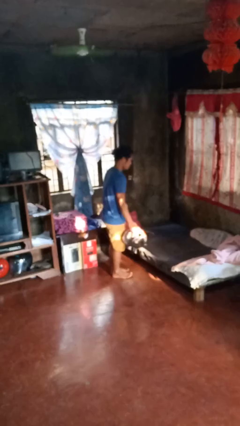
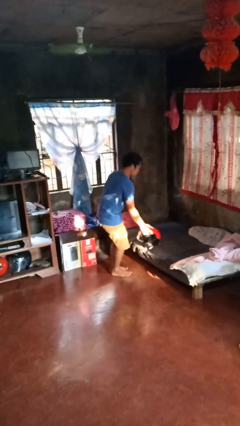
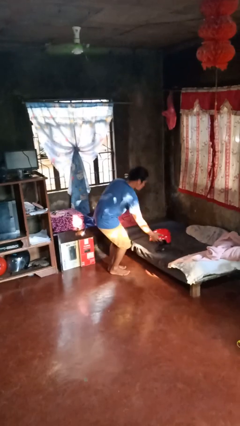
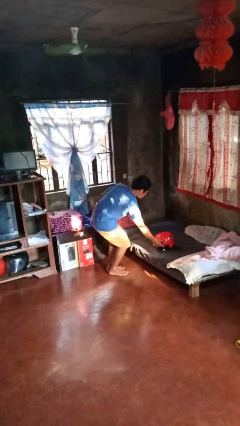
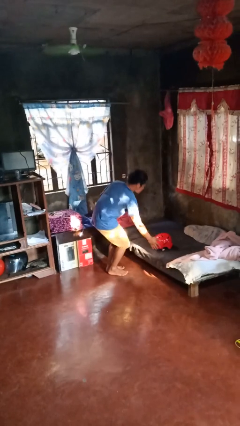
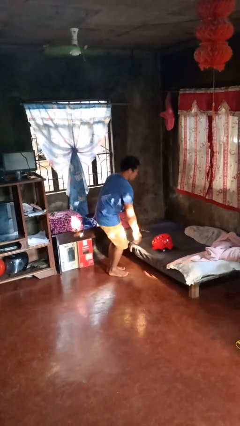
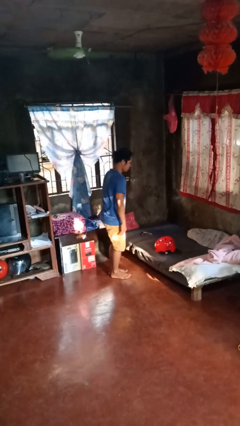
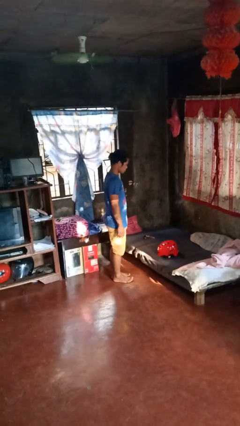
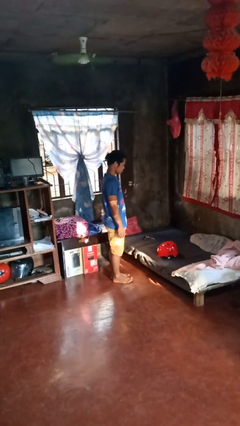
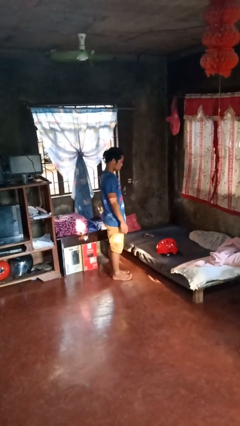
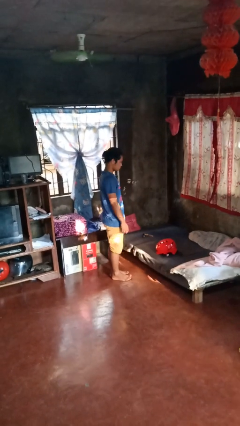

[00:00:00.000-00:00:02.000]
person puts down object on bed

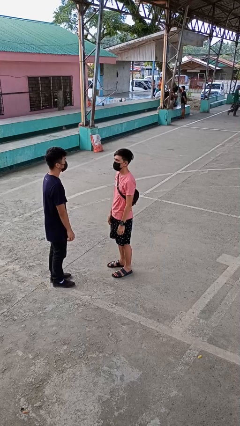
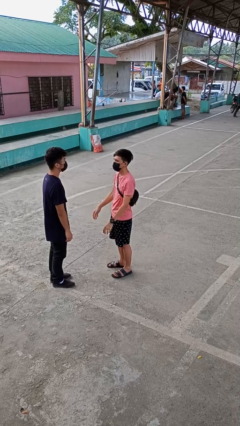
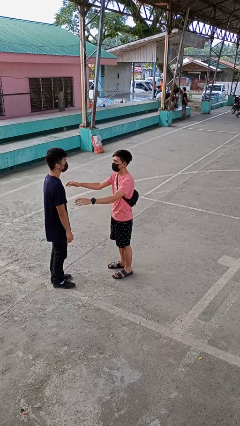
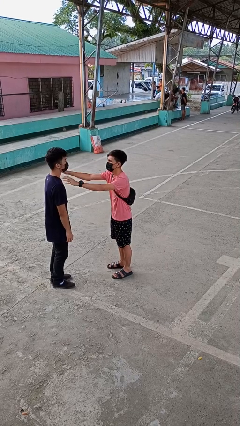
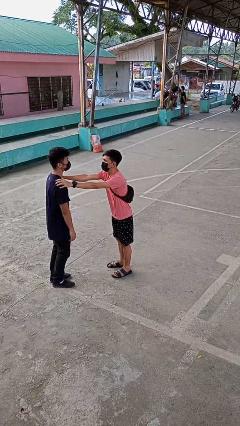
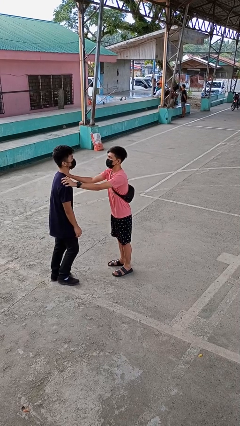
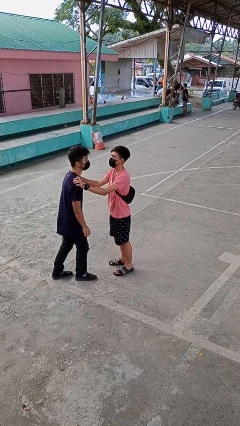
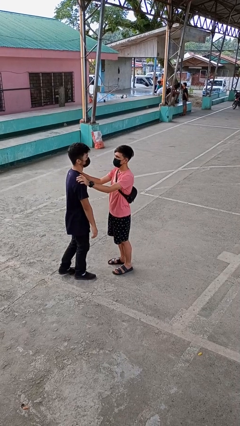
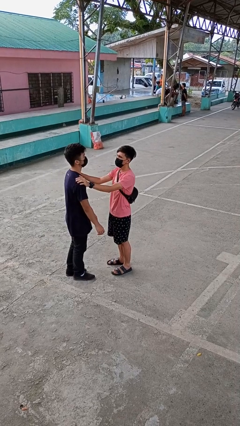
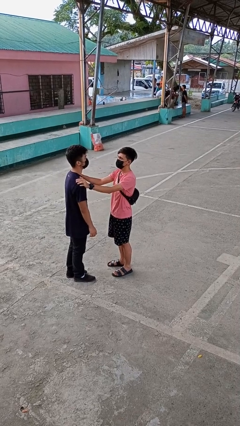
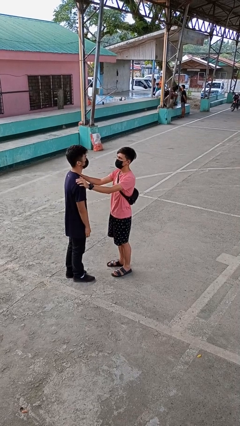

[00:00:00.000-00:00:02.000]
person grabs person by shoulder

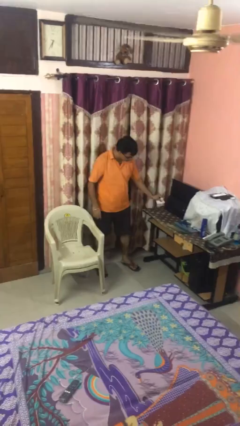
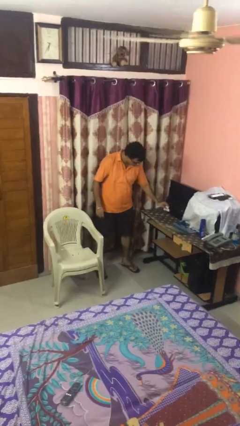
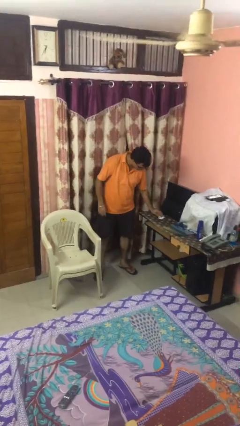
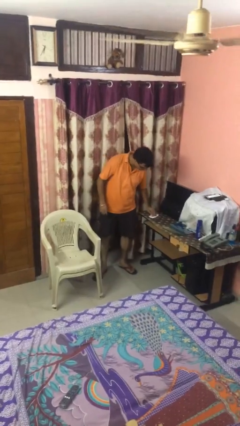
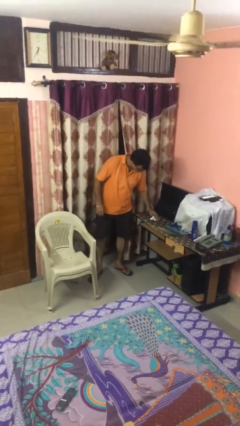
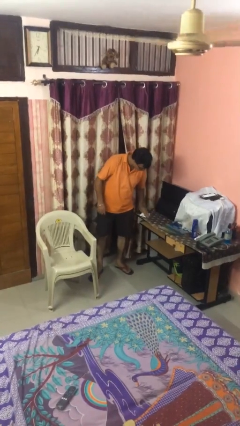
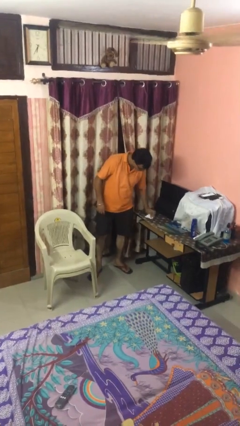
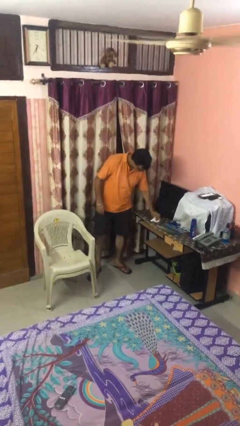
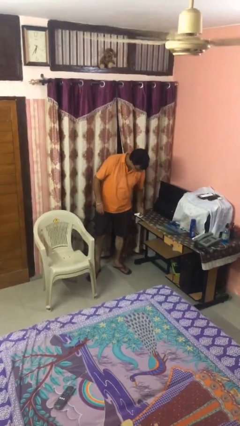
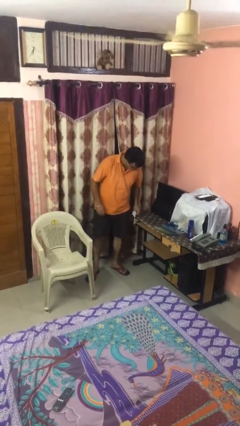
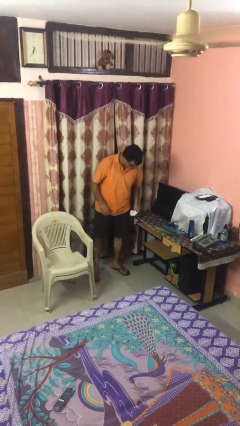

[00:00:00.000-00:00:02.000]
person cleans table with rag

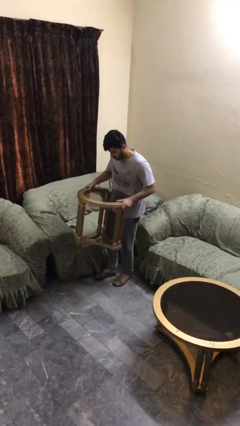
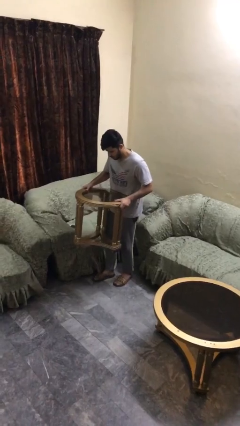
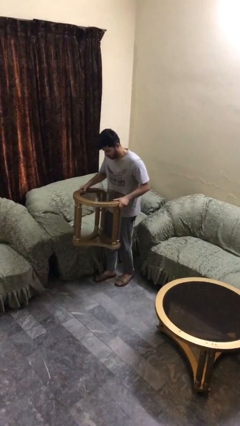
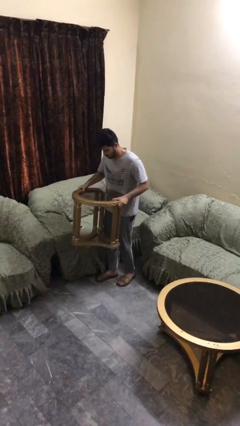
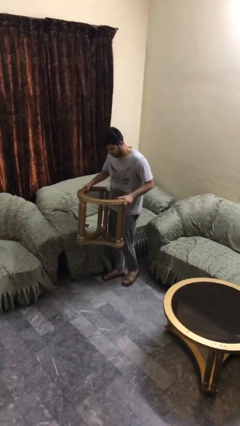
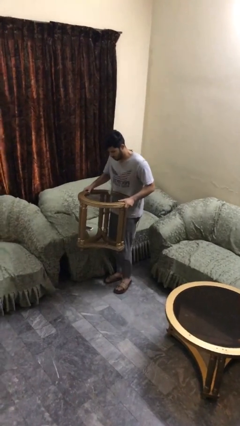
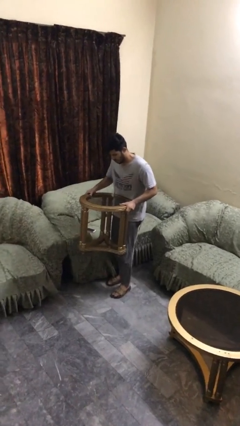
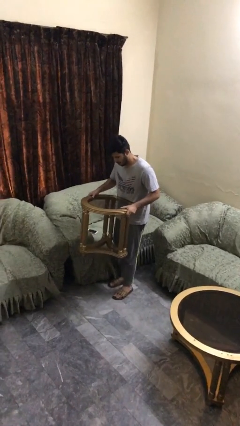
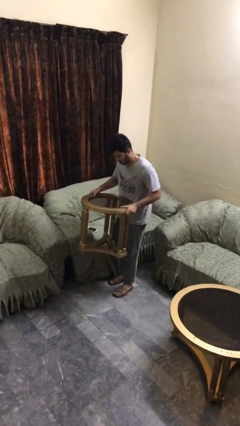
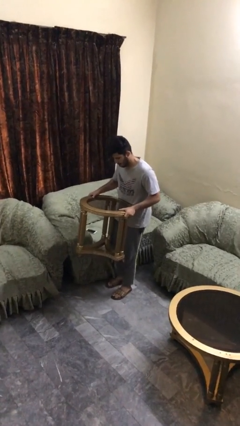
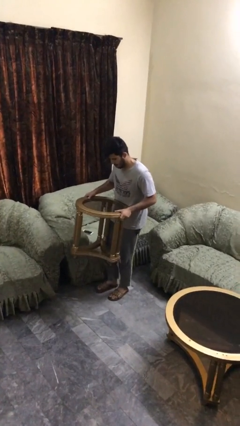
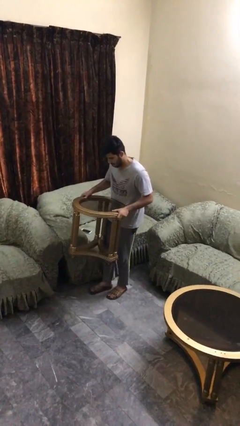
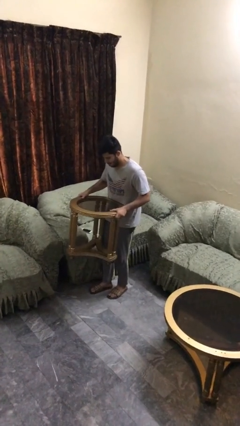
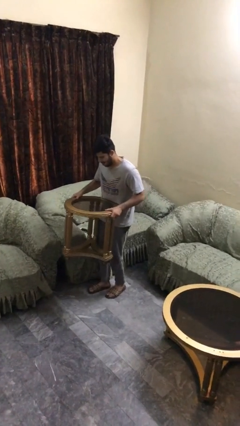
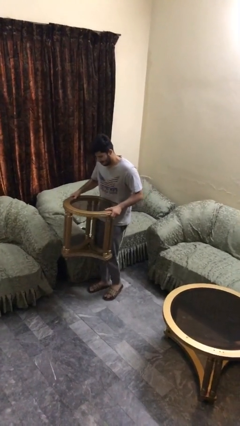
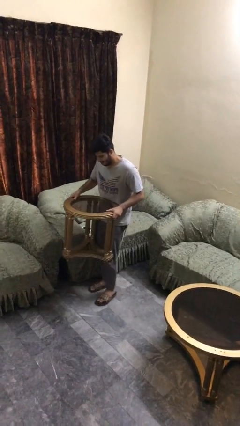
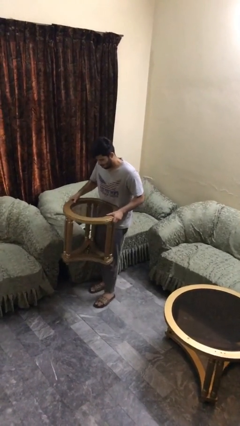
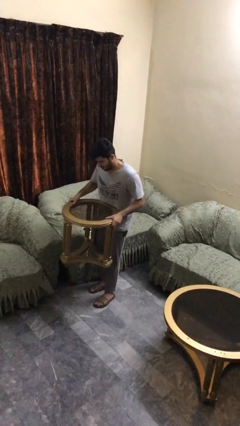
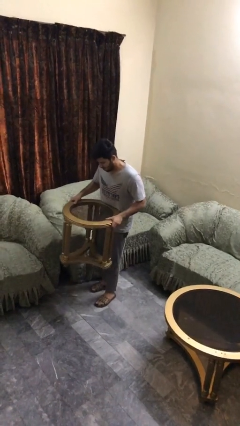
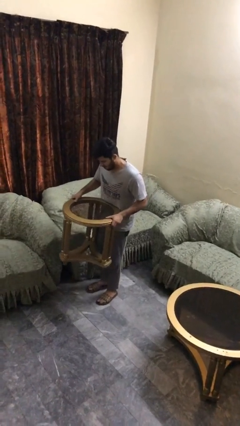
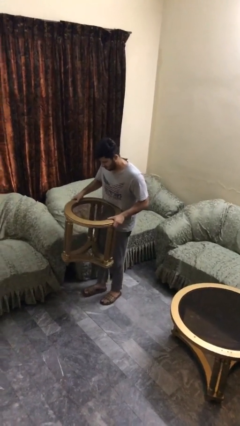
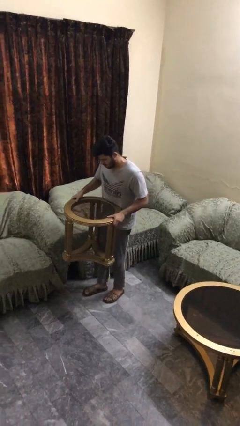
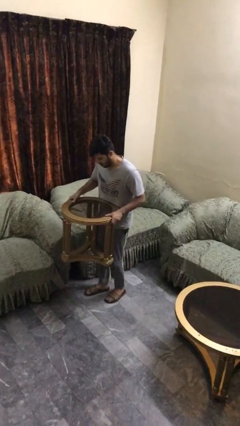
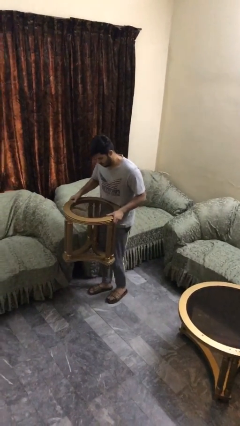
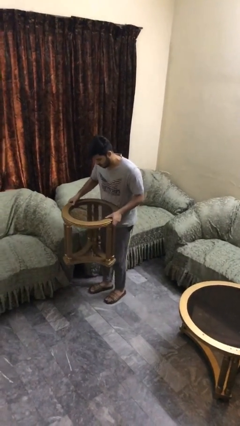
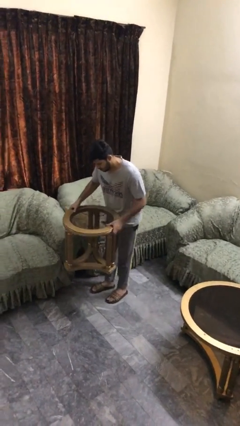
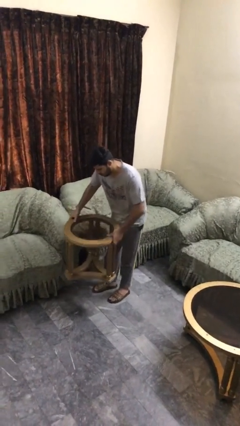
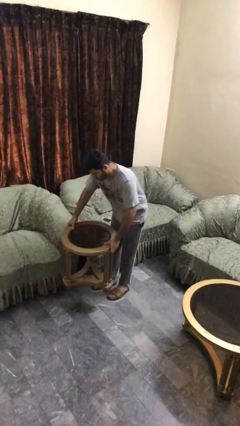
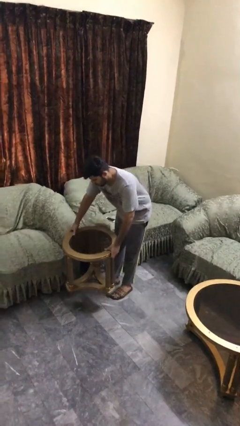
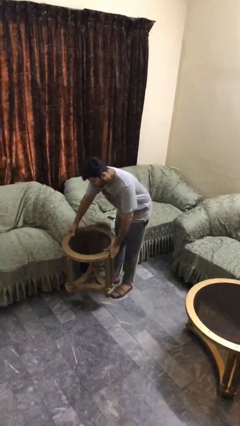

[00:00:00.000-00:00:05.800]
person carries heavy object

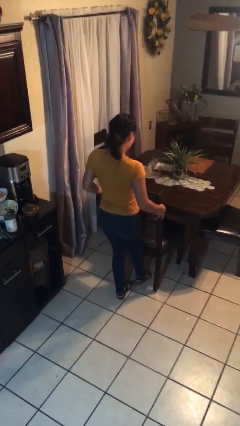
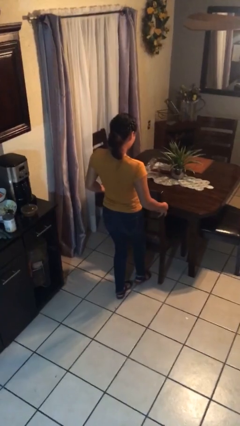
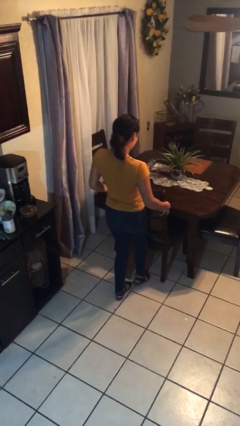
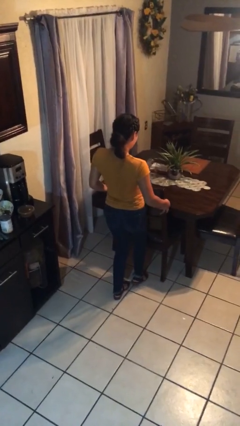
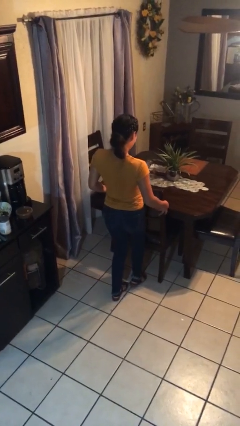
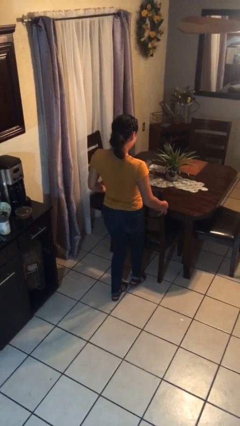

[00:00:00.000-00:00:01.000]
person pushes in chair

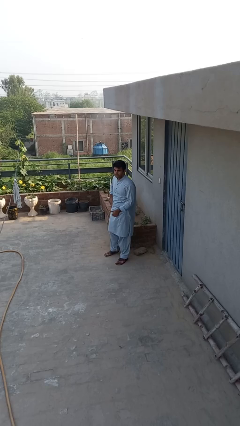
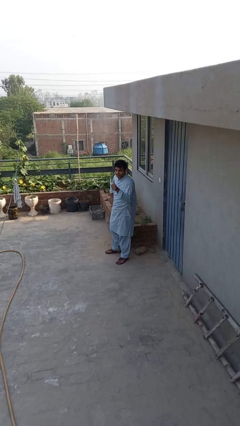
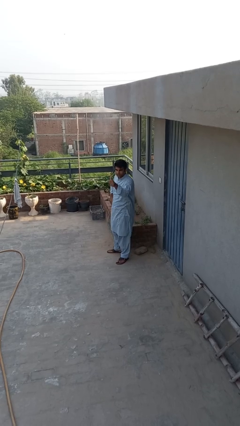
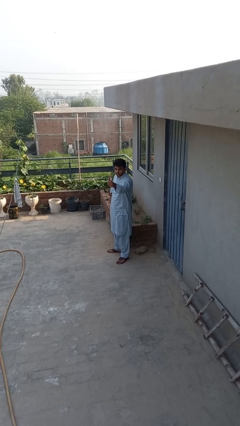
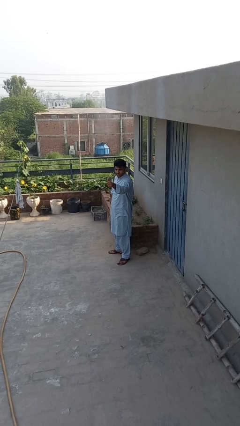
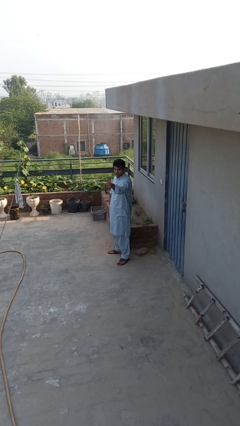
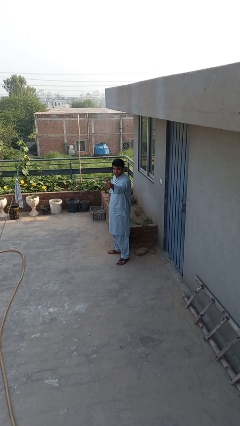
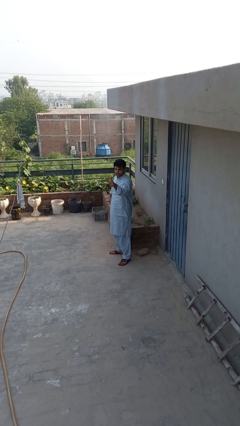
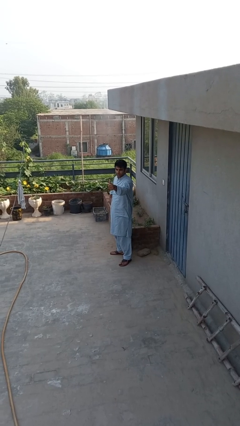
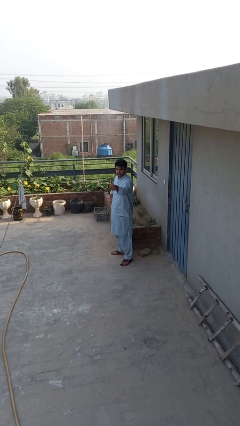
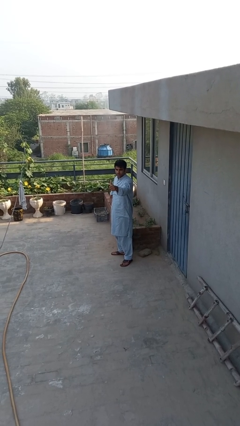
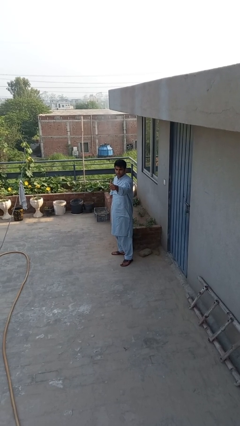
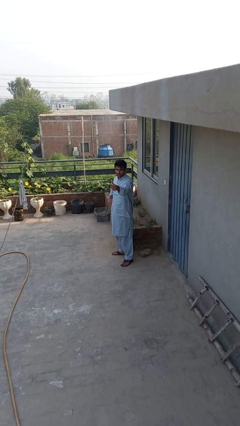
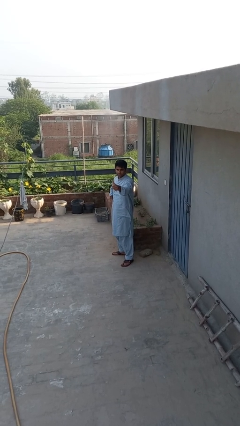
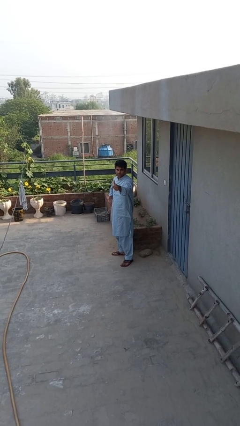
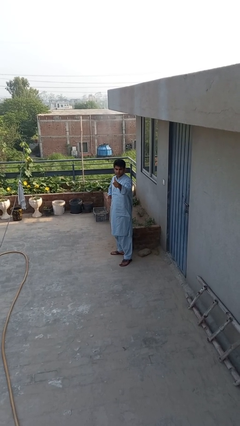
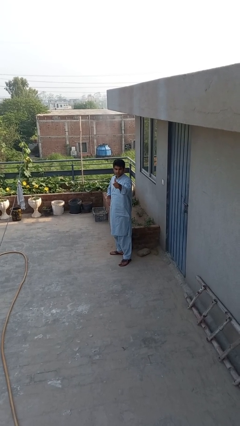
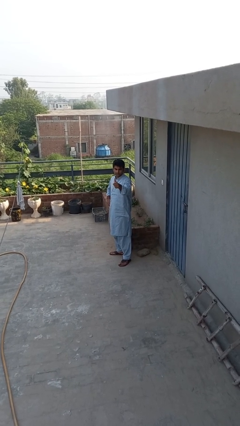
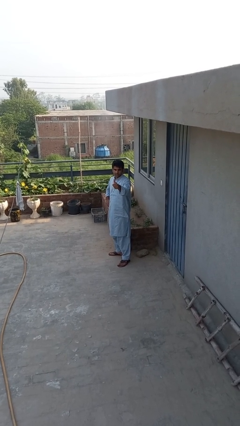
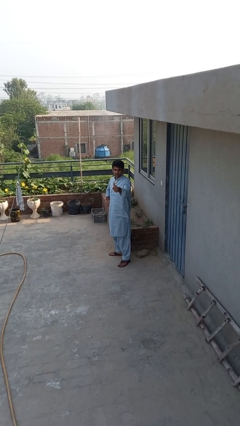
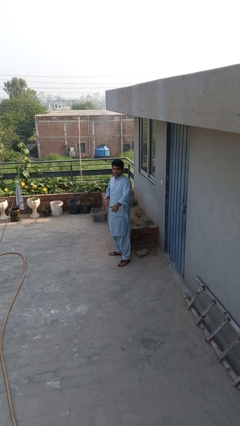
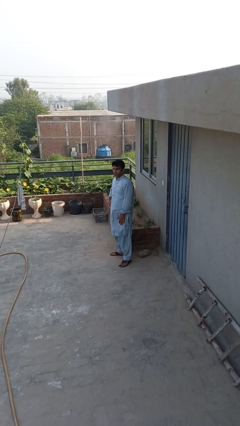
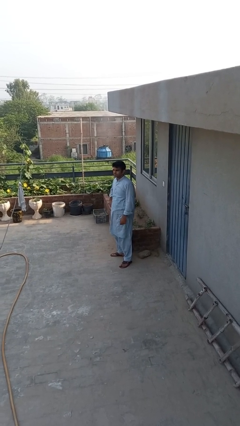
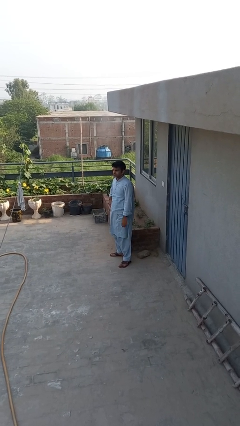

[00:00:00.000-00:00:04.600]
person gestures thumbs up
